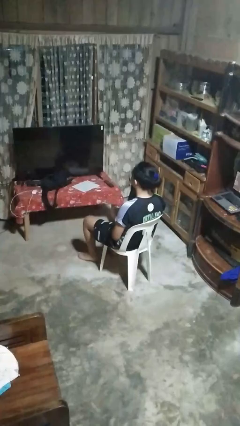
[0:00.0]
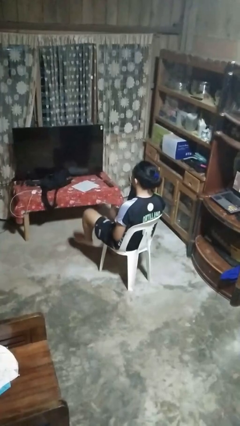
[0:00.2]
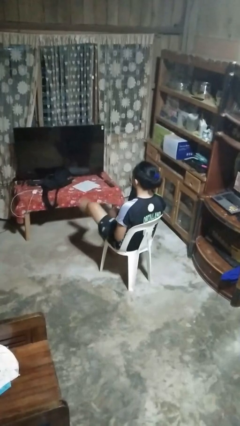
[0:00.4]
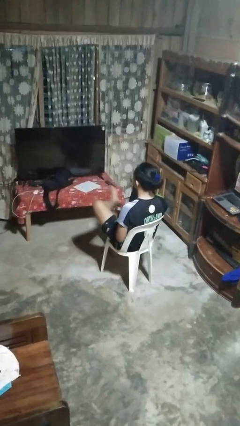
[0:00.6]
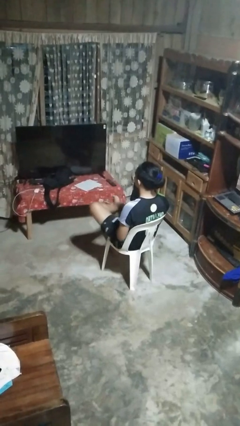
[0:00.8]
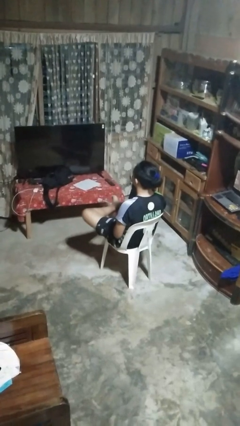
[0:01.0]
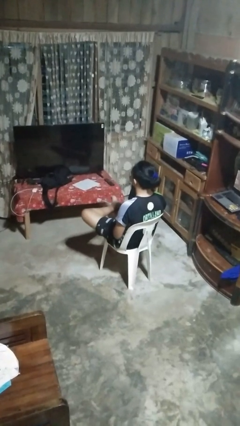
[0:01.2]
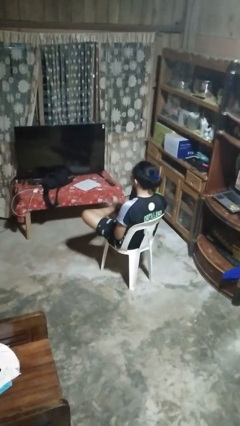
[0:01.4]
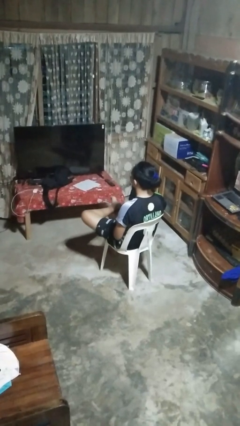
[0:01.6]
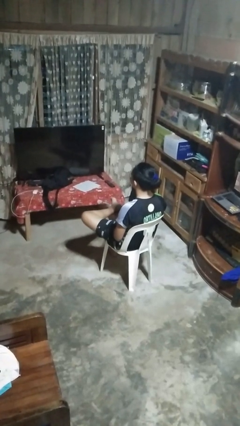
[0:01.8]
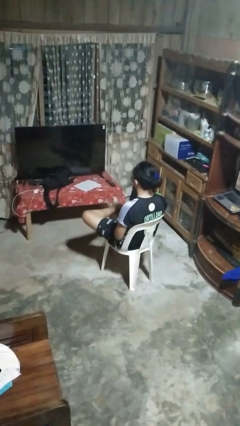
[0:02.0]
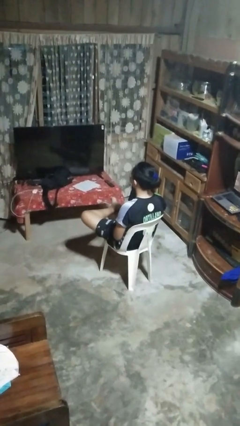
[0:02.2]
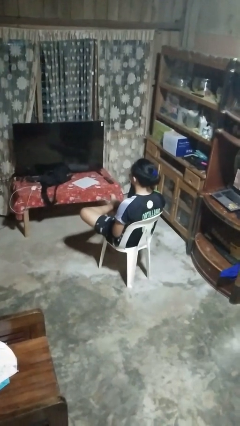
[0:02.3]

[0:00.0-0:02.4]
person crosses legs

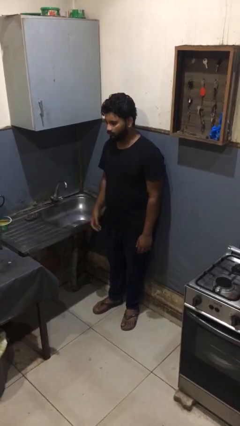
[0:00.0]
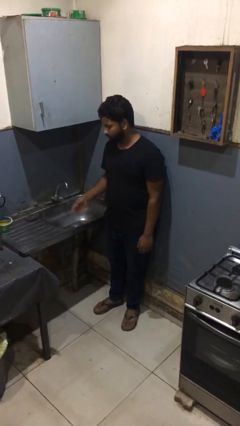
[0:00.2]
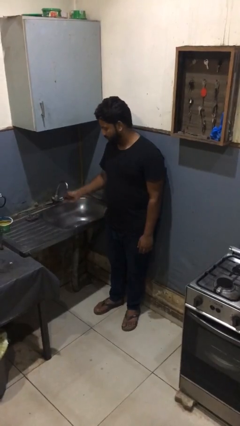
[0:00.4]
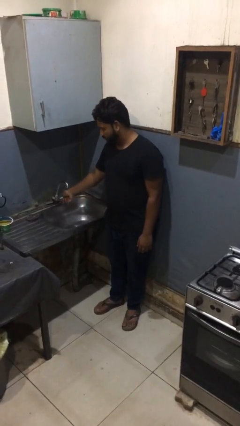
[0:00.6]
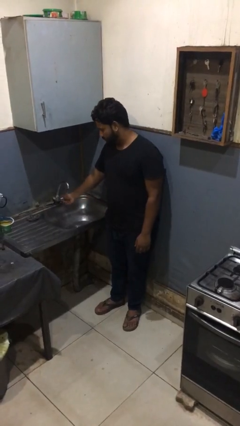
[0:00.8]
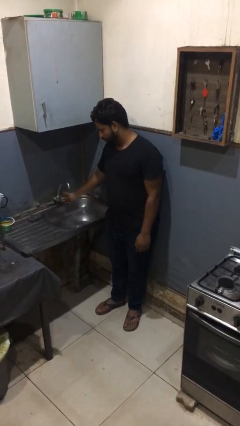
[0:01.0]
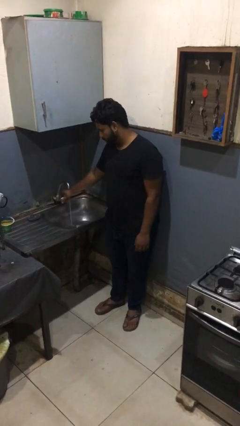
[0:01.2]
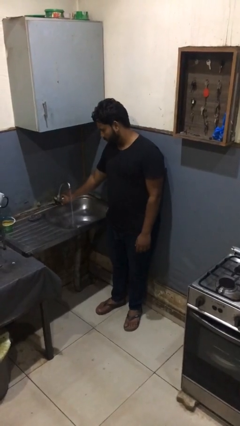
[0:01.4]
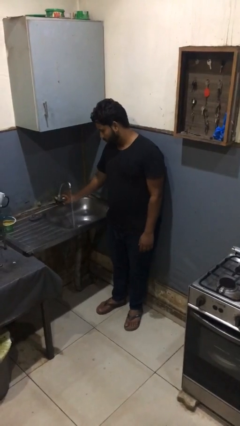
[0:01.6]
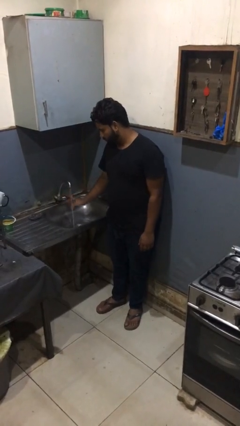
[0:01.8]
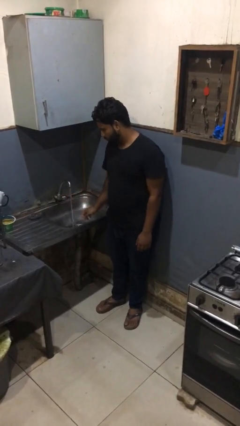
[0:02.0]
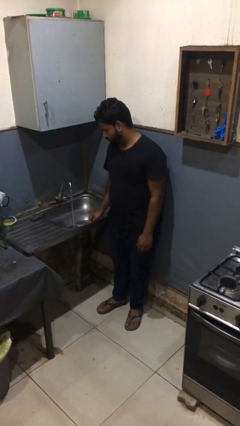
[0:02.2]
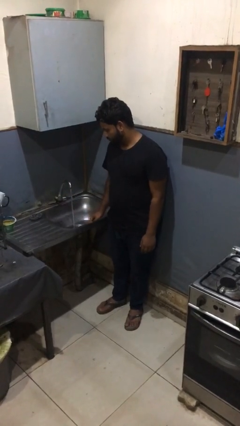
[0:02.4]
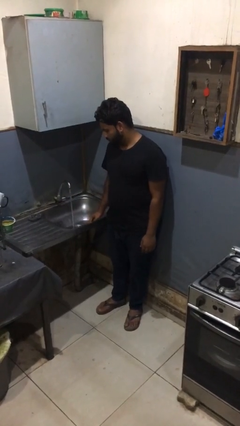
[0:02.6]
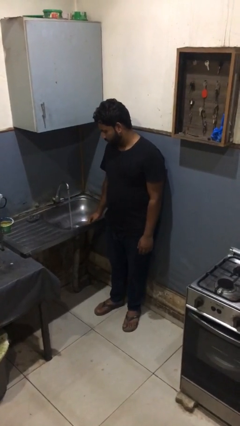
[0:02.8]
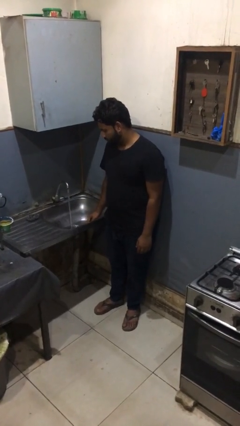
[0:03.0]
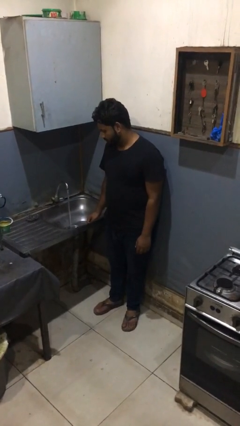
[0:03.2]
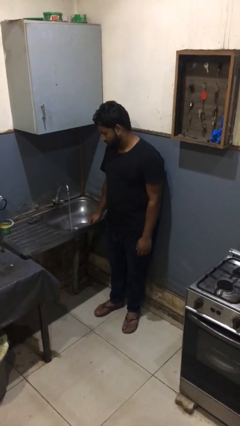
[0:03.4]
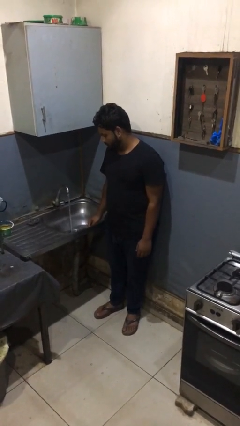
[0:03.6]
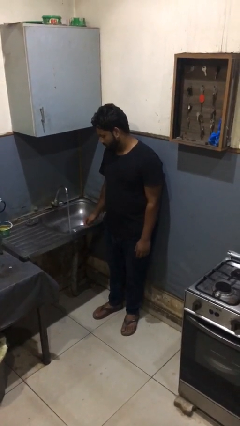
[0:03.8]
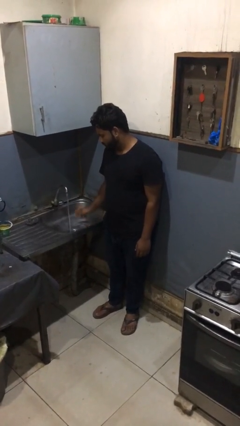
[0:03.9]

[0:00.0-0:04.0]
person turns on faucet

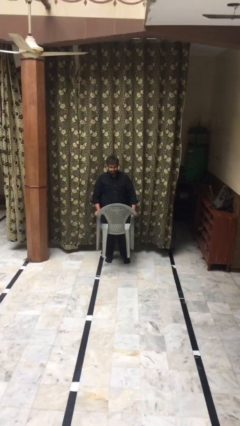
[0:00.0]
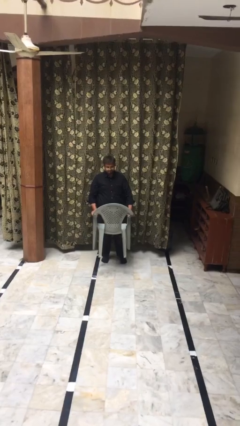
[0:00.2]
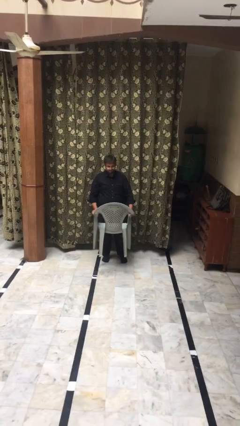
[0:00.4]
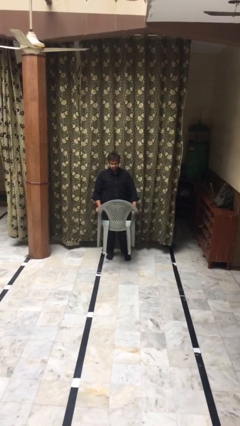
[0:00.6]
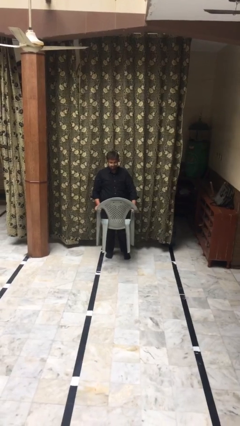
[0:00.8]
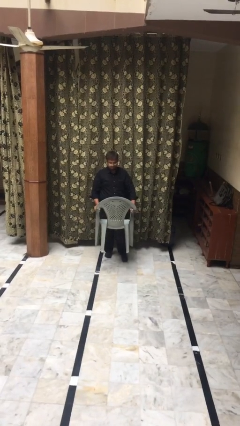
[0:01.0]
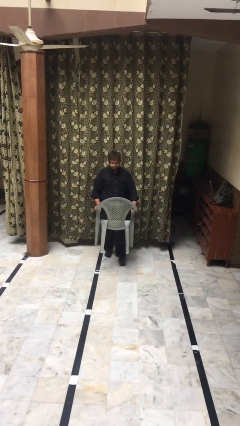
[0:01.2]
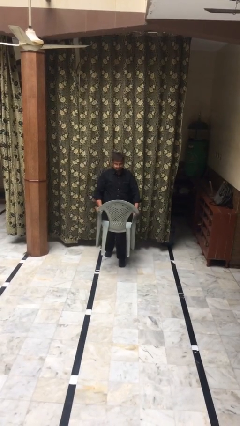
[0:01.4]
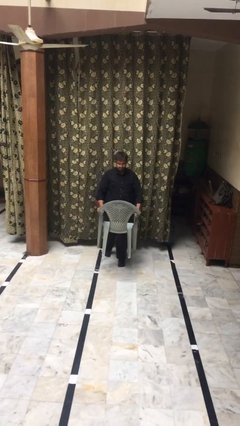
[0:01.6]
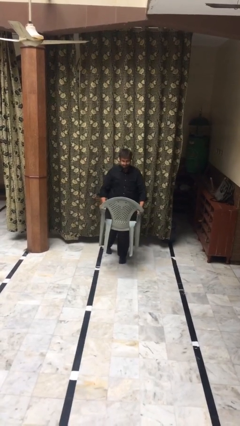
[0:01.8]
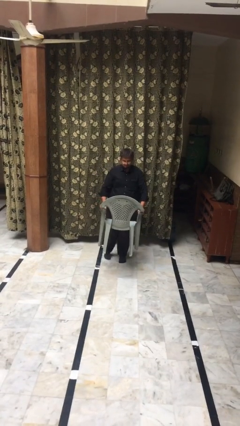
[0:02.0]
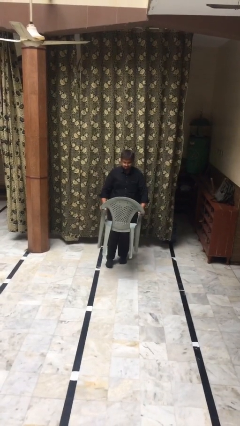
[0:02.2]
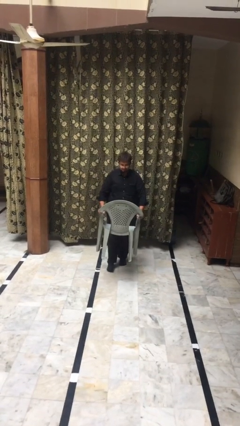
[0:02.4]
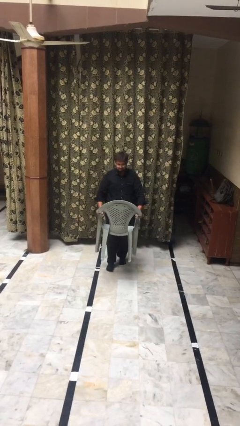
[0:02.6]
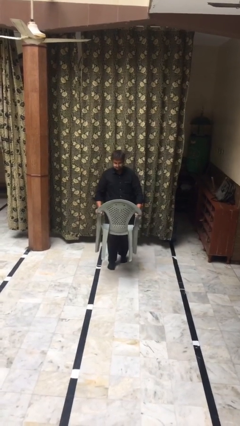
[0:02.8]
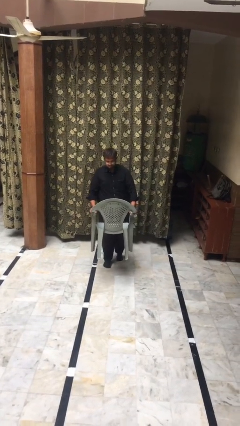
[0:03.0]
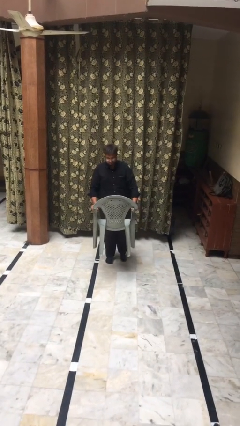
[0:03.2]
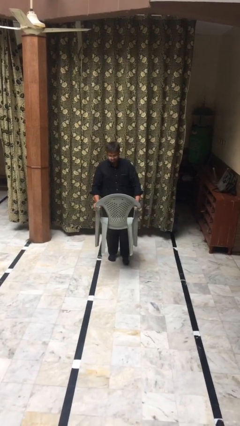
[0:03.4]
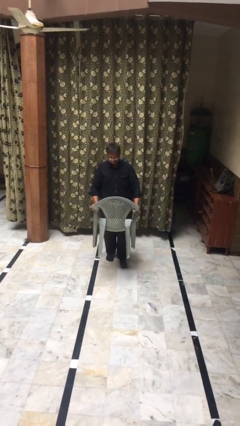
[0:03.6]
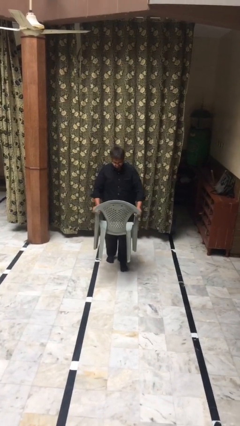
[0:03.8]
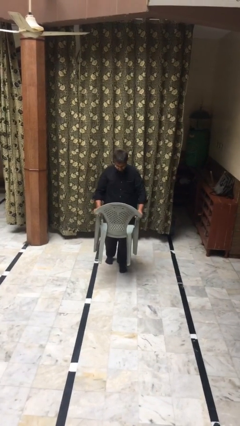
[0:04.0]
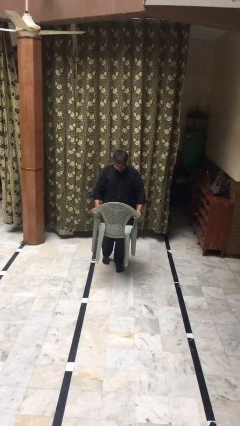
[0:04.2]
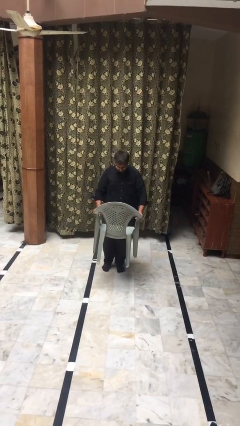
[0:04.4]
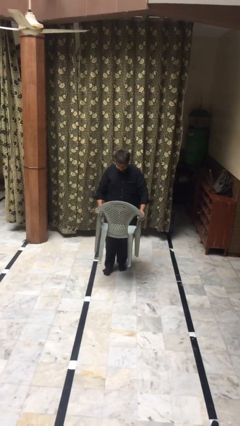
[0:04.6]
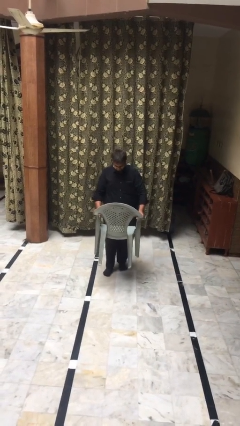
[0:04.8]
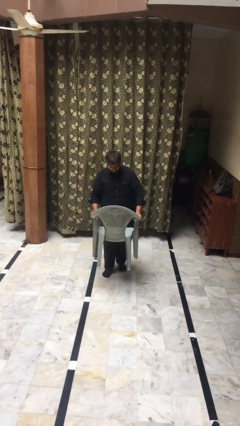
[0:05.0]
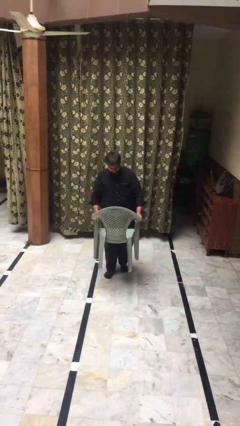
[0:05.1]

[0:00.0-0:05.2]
person carries heavy object

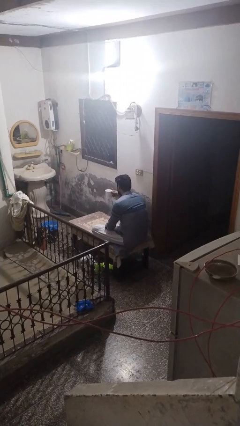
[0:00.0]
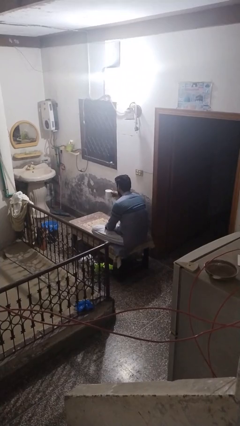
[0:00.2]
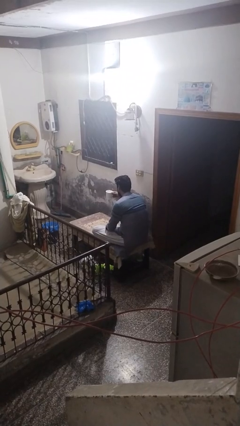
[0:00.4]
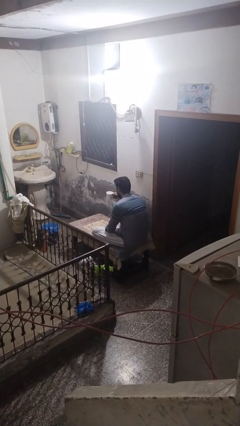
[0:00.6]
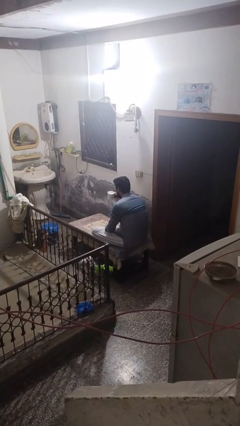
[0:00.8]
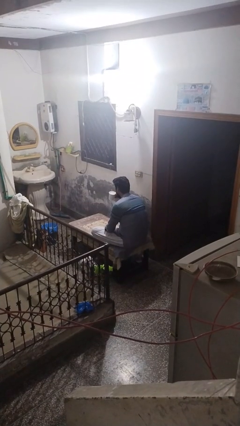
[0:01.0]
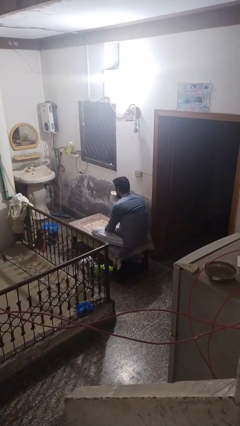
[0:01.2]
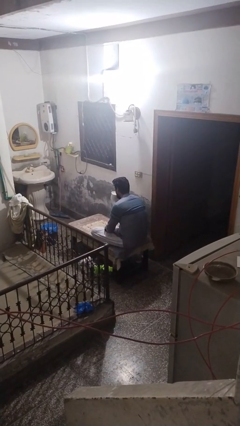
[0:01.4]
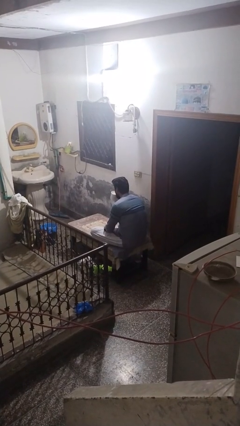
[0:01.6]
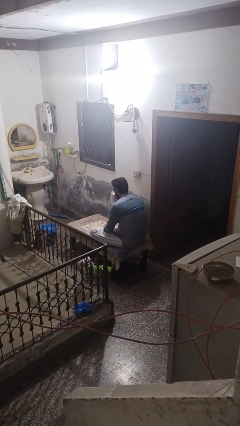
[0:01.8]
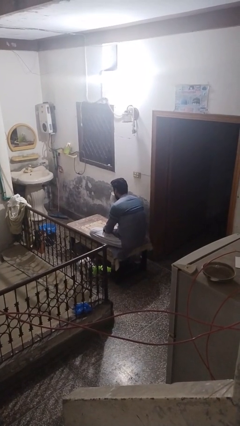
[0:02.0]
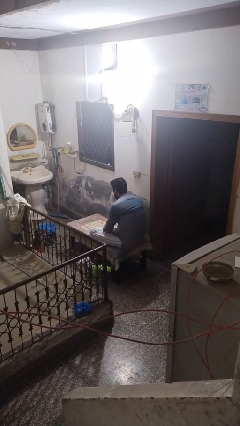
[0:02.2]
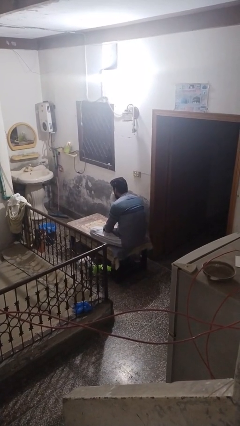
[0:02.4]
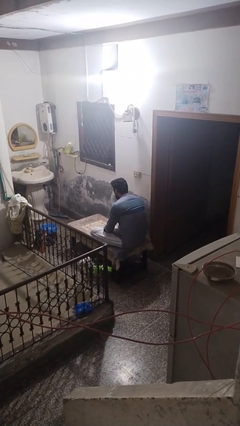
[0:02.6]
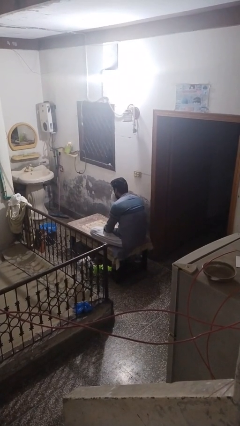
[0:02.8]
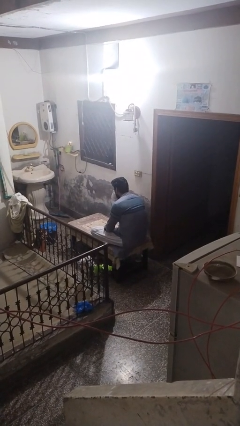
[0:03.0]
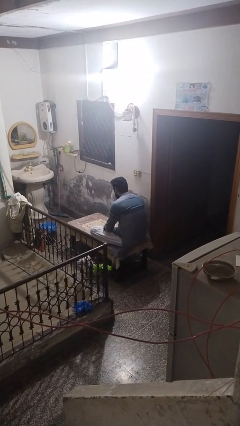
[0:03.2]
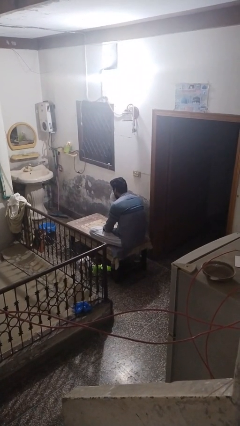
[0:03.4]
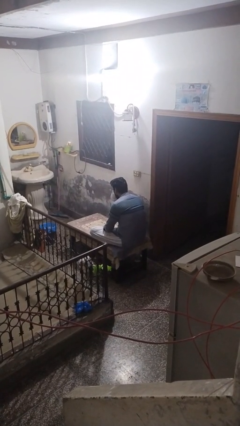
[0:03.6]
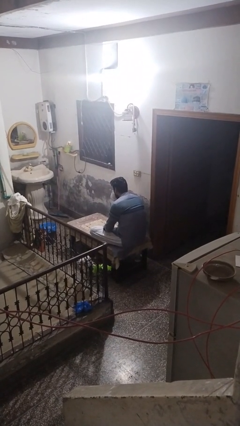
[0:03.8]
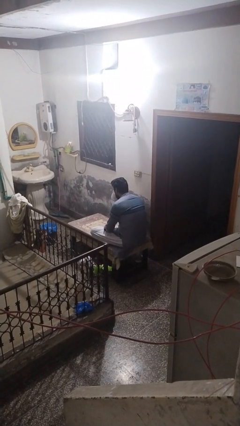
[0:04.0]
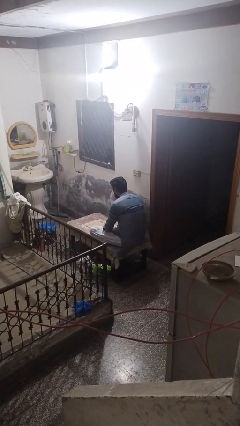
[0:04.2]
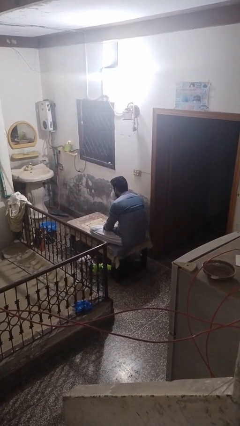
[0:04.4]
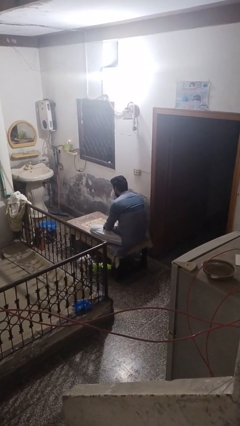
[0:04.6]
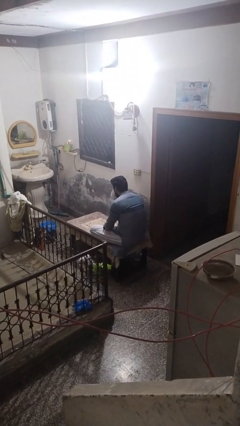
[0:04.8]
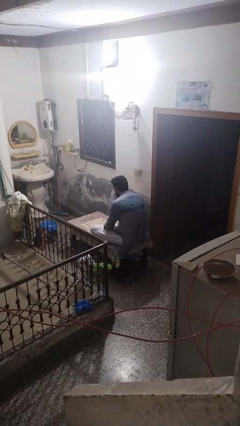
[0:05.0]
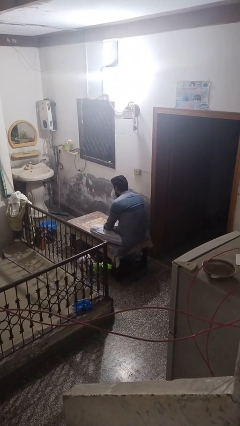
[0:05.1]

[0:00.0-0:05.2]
person drinks from mug

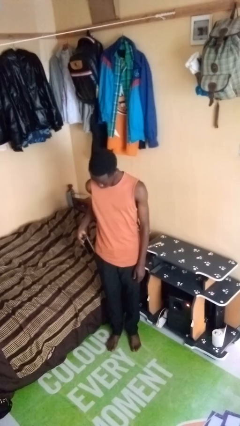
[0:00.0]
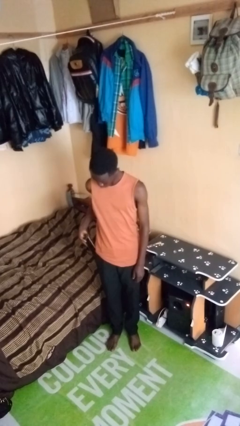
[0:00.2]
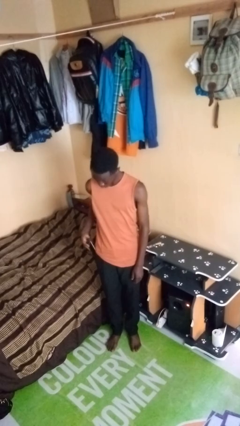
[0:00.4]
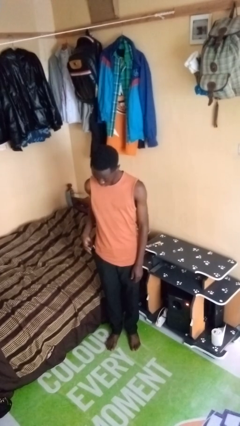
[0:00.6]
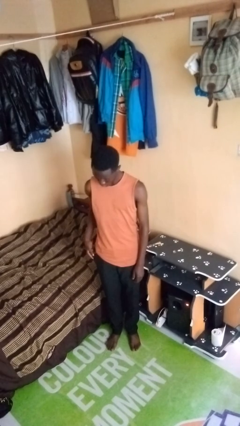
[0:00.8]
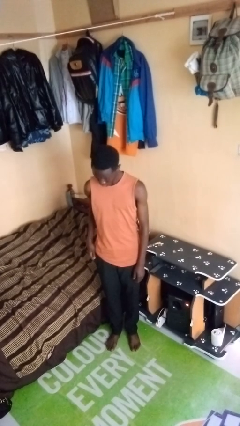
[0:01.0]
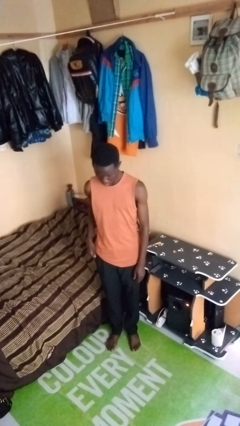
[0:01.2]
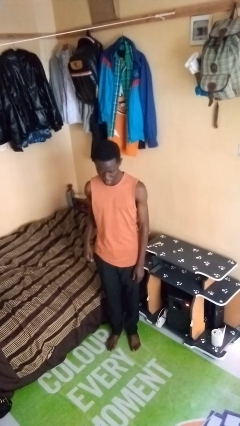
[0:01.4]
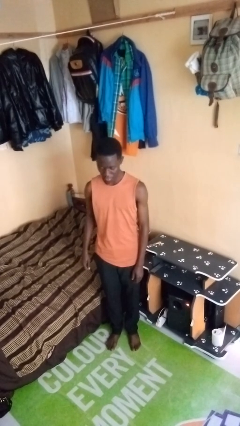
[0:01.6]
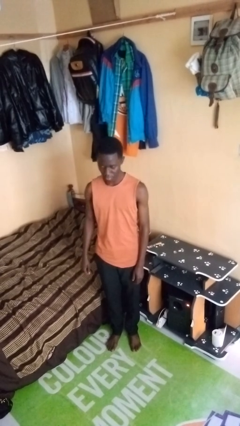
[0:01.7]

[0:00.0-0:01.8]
person puts phone into pocket
